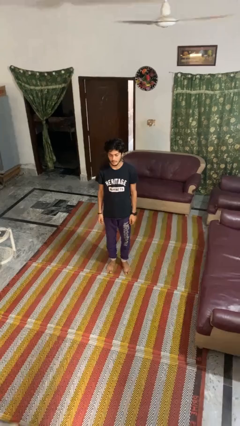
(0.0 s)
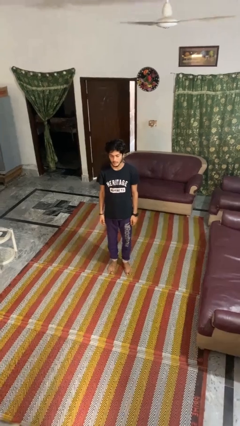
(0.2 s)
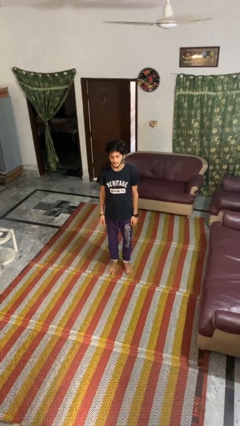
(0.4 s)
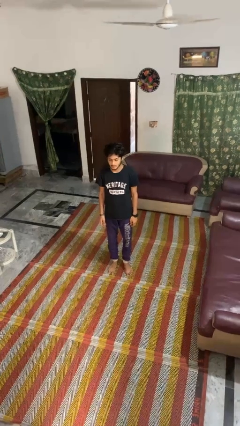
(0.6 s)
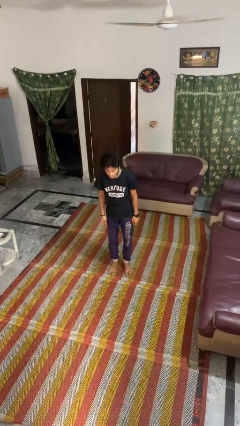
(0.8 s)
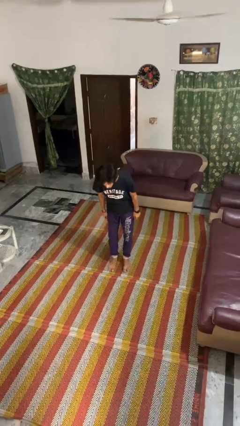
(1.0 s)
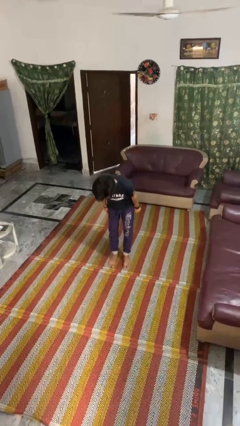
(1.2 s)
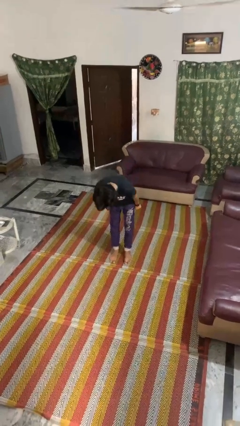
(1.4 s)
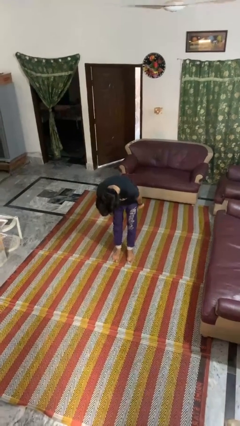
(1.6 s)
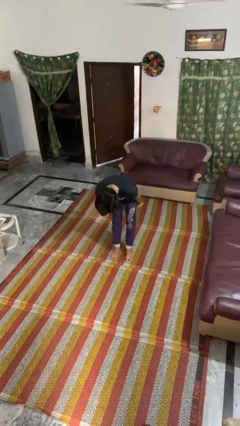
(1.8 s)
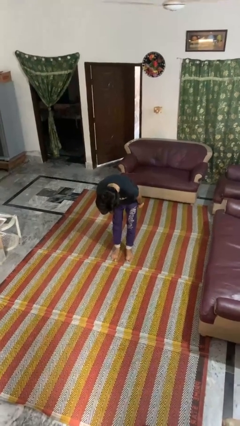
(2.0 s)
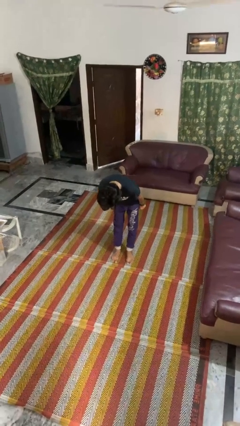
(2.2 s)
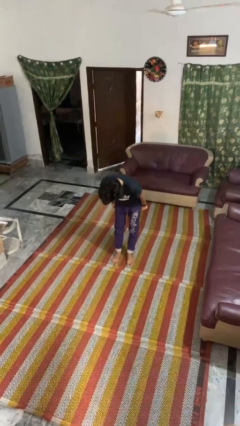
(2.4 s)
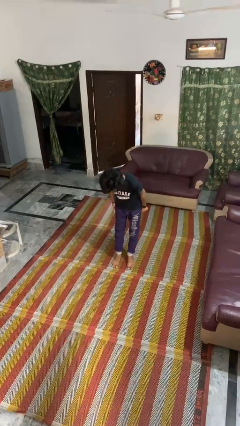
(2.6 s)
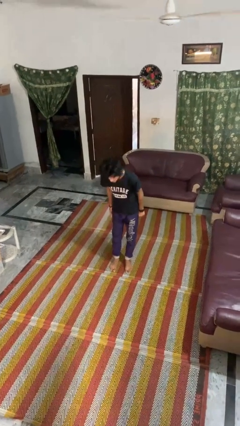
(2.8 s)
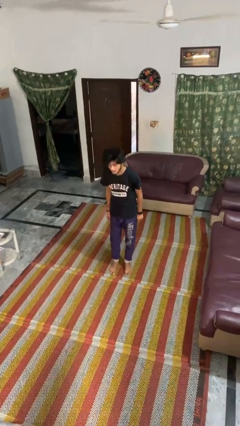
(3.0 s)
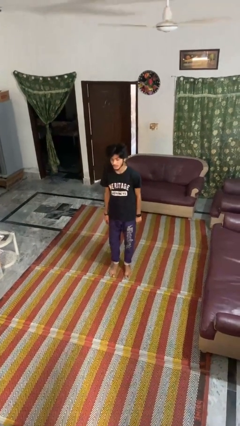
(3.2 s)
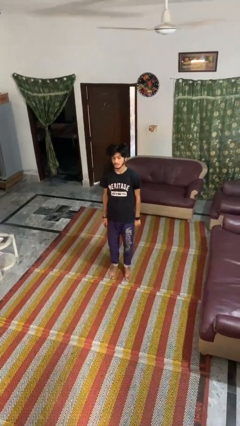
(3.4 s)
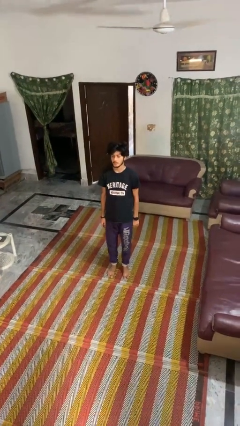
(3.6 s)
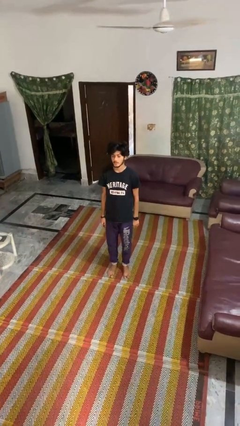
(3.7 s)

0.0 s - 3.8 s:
person bows

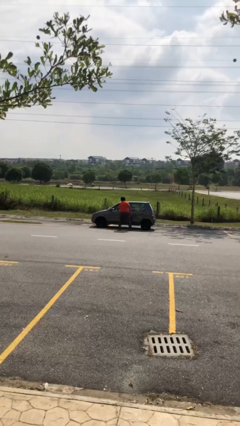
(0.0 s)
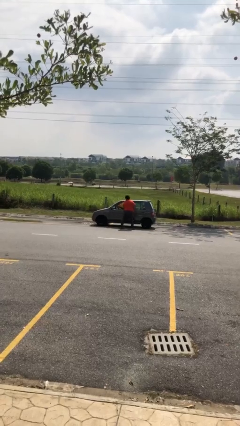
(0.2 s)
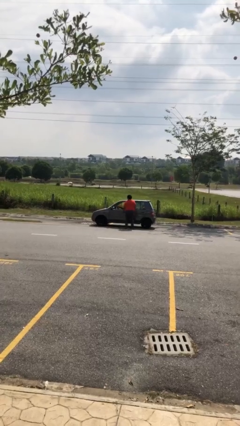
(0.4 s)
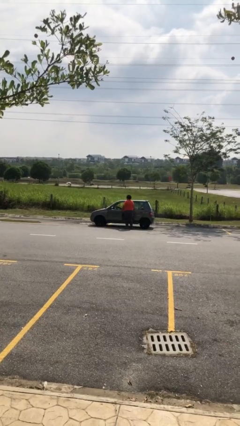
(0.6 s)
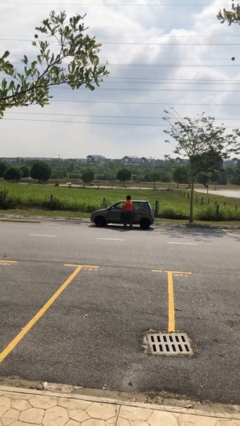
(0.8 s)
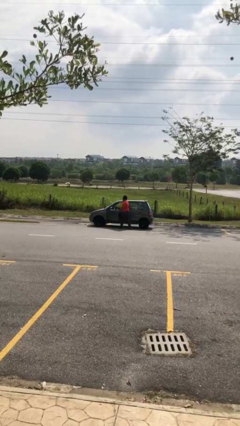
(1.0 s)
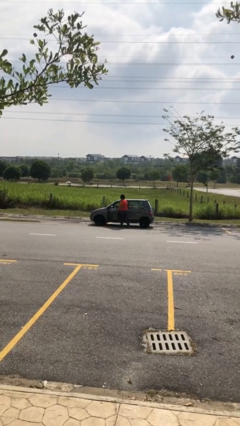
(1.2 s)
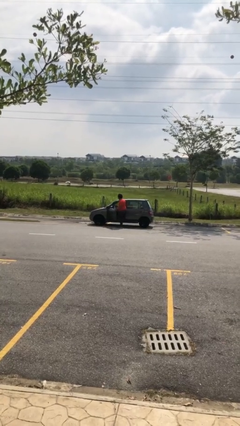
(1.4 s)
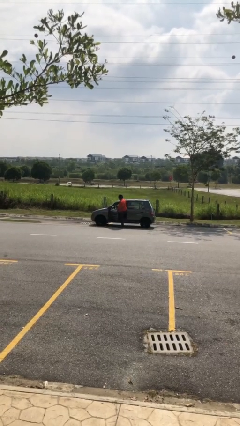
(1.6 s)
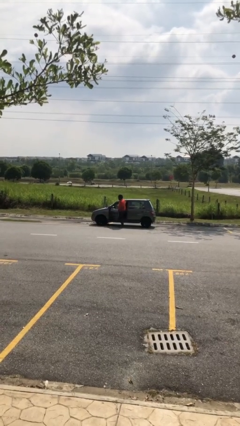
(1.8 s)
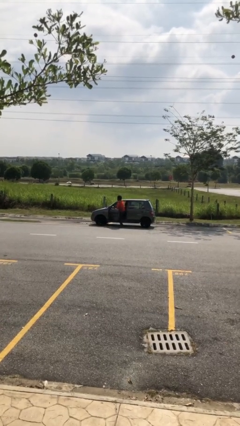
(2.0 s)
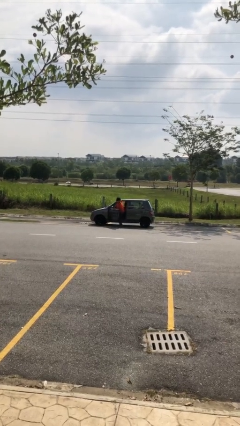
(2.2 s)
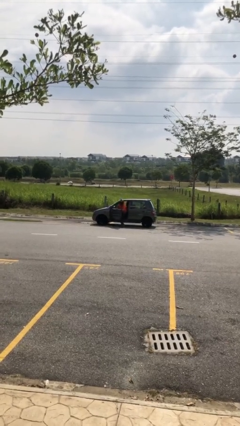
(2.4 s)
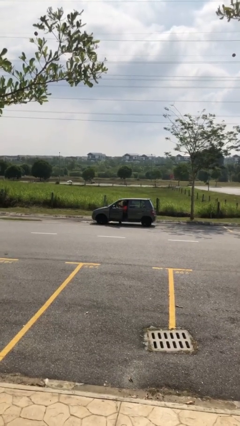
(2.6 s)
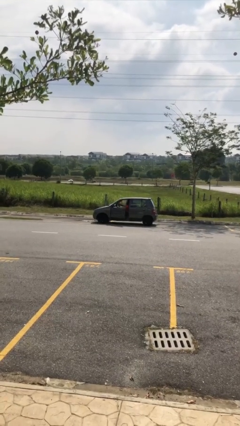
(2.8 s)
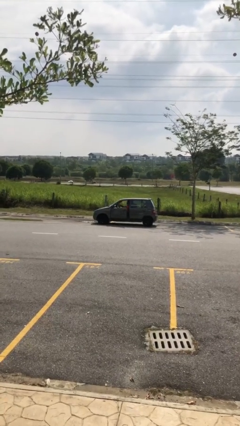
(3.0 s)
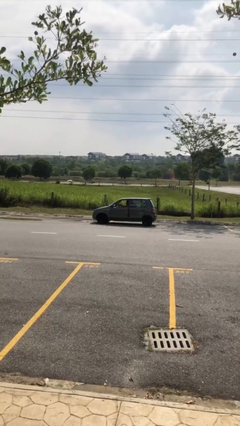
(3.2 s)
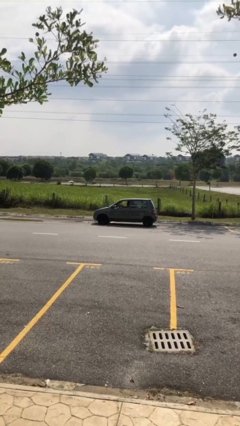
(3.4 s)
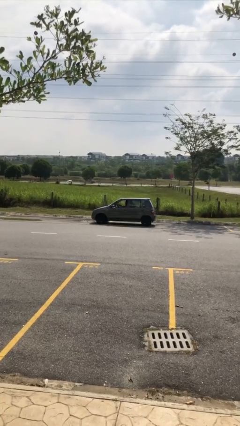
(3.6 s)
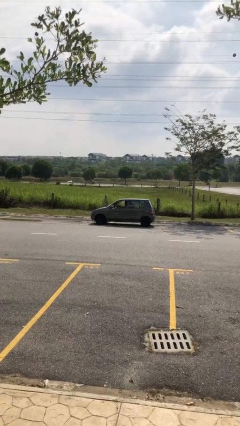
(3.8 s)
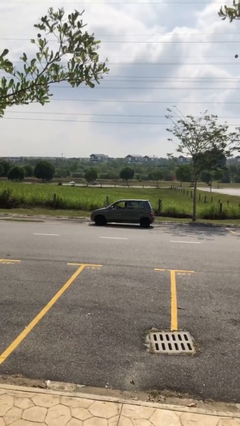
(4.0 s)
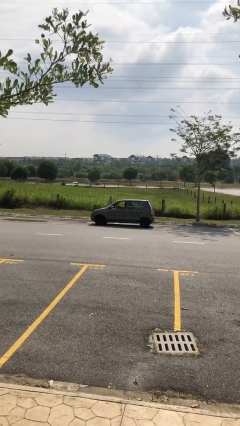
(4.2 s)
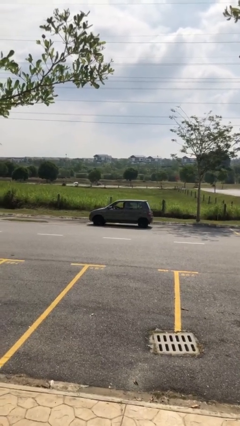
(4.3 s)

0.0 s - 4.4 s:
car picks up person

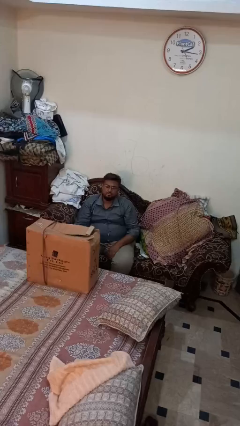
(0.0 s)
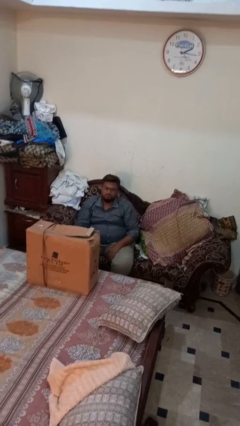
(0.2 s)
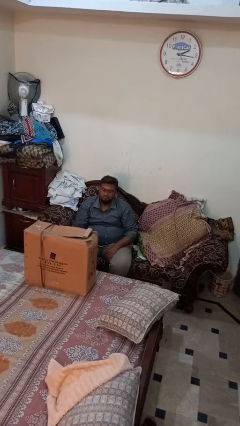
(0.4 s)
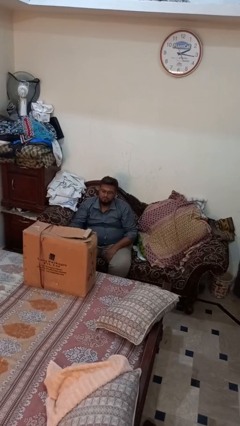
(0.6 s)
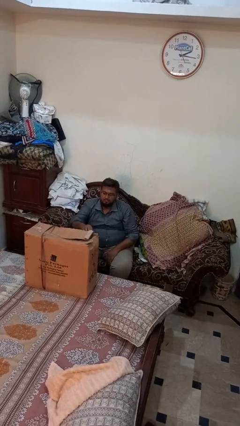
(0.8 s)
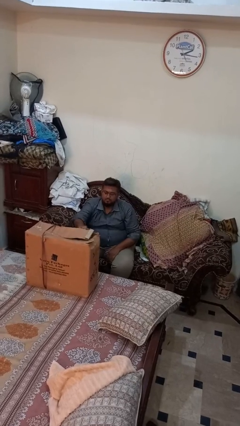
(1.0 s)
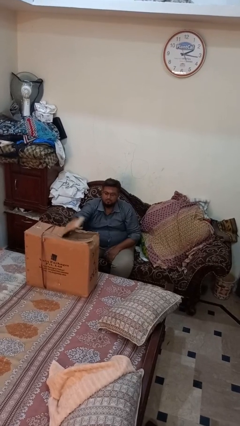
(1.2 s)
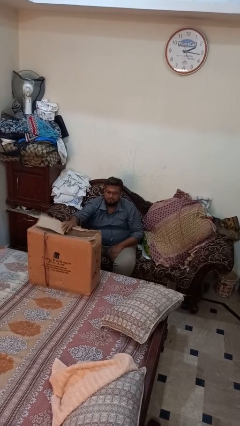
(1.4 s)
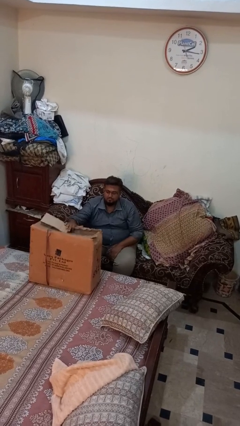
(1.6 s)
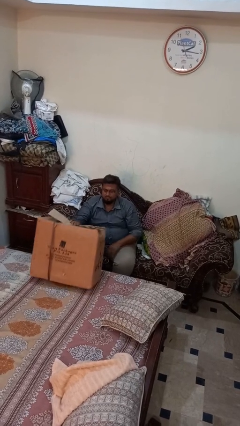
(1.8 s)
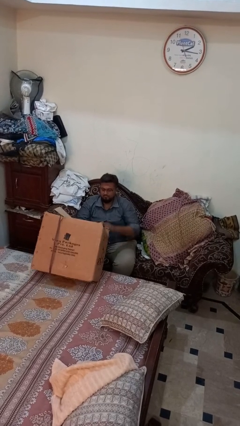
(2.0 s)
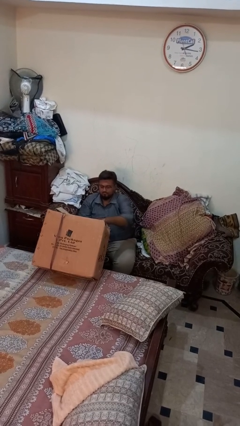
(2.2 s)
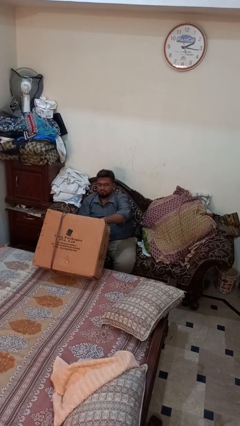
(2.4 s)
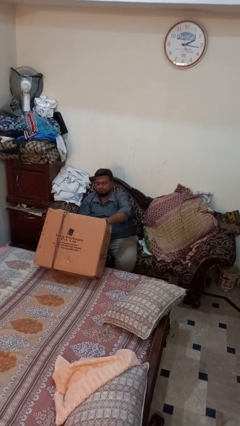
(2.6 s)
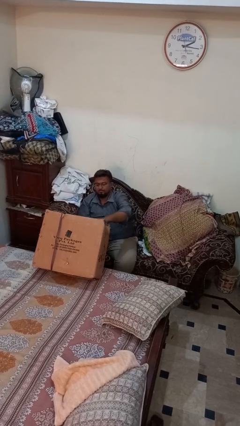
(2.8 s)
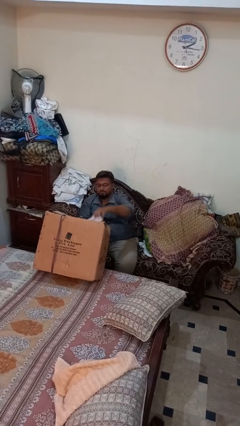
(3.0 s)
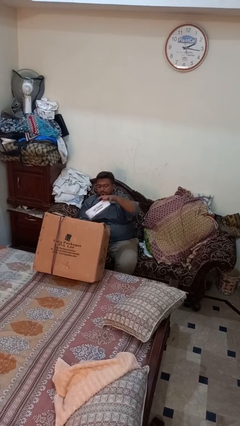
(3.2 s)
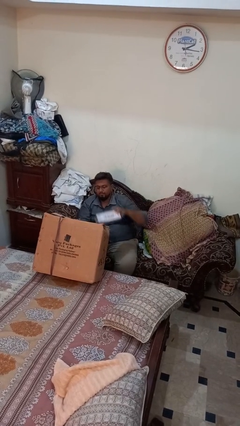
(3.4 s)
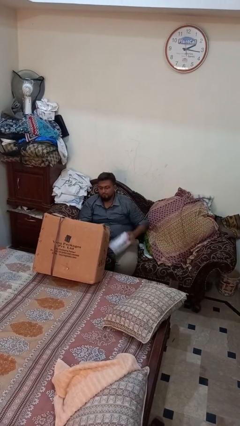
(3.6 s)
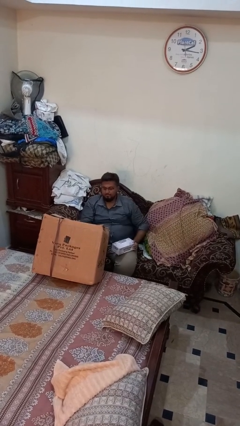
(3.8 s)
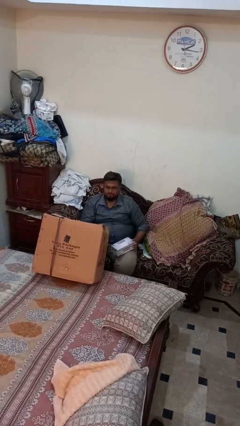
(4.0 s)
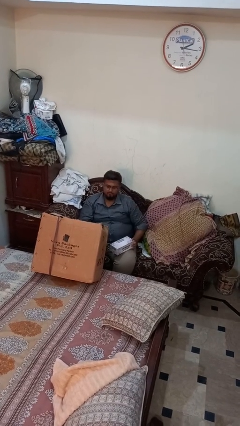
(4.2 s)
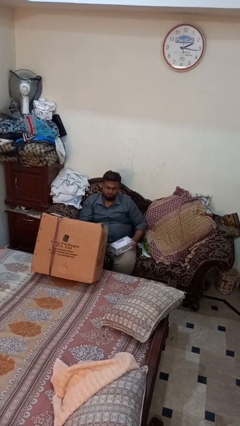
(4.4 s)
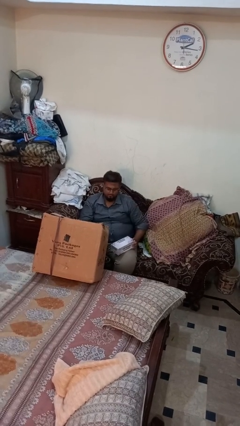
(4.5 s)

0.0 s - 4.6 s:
person takes object from box

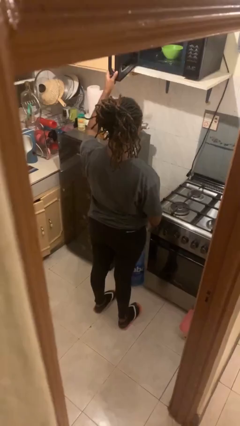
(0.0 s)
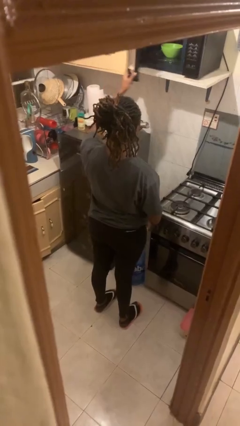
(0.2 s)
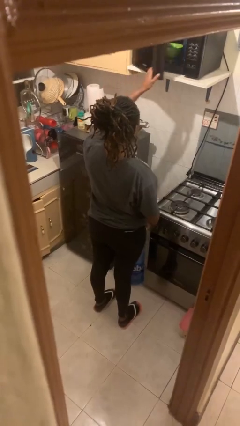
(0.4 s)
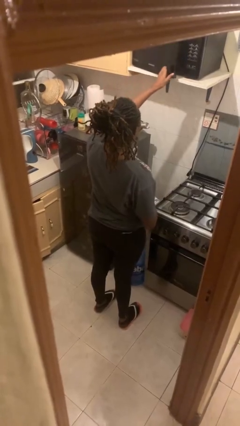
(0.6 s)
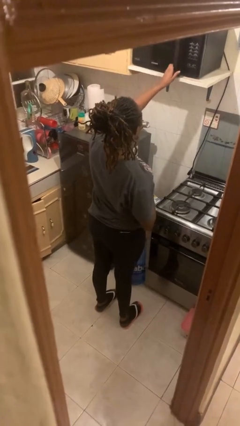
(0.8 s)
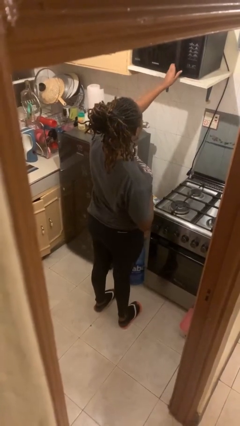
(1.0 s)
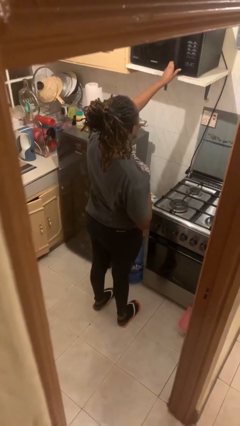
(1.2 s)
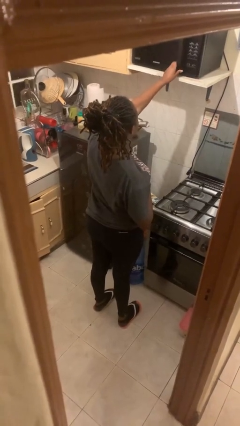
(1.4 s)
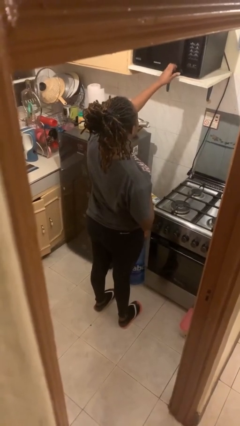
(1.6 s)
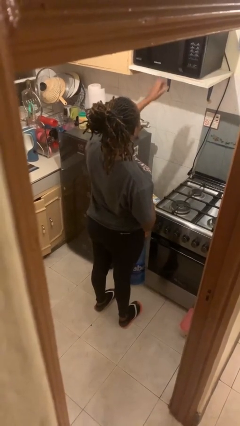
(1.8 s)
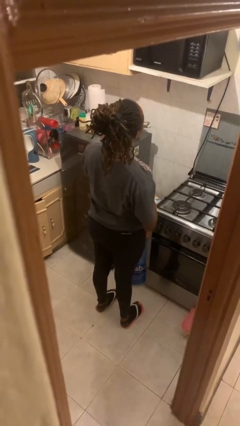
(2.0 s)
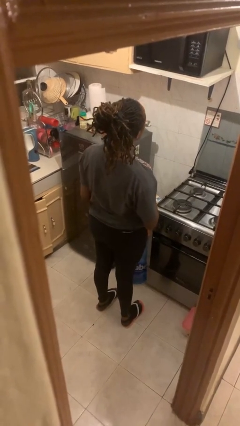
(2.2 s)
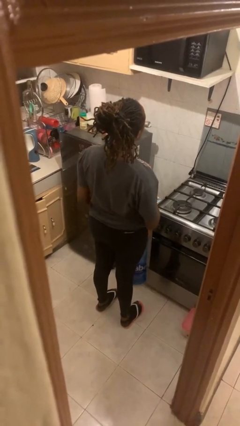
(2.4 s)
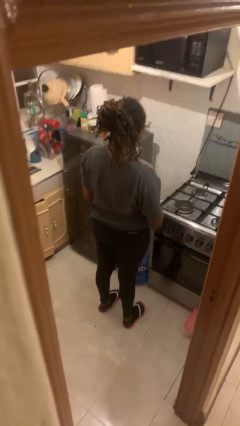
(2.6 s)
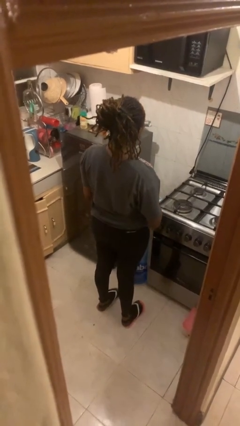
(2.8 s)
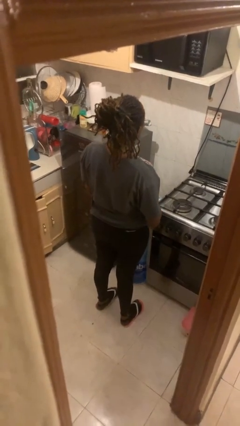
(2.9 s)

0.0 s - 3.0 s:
person closes microwave

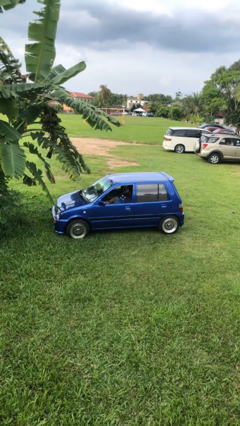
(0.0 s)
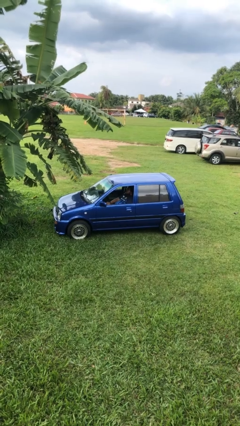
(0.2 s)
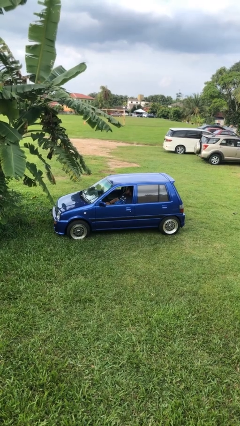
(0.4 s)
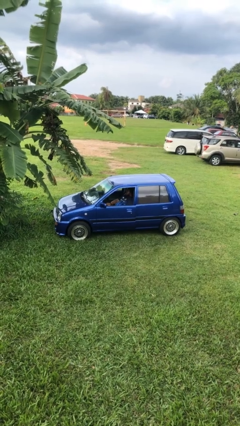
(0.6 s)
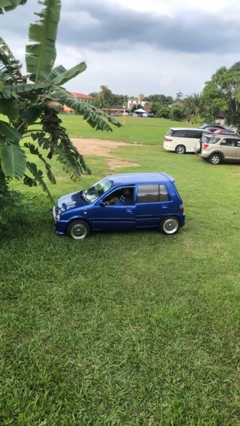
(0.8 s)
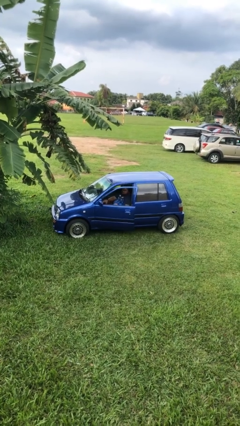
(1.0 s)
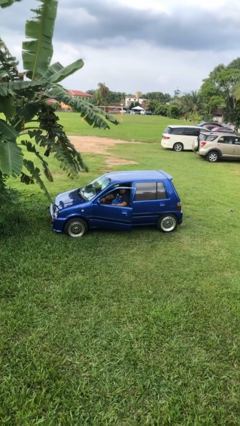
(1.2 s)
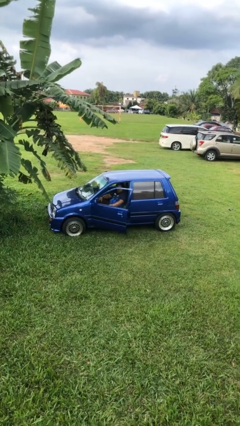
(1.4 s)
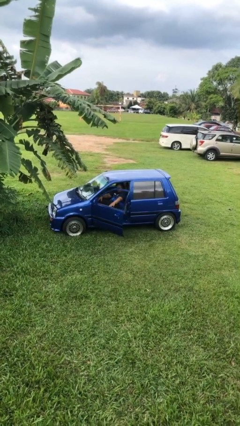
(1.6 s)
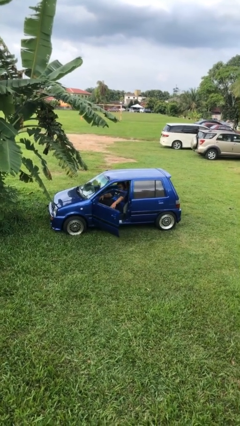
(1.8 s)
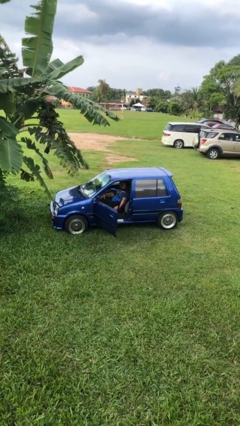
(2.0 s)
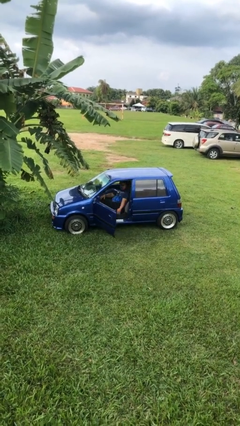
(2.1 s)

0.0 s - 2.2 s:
person opens car door
